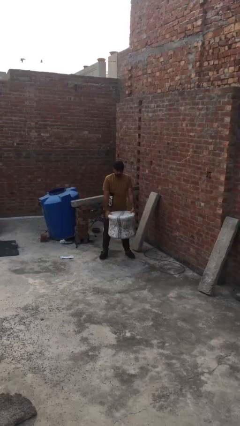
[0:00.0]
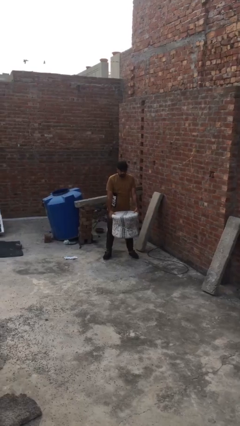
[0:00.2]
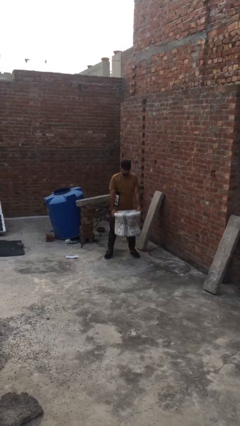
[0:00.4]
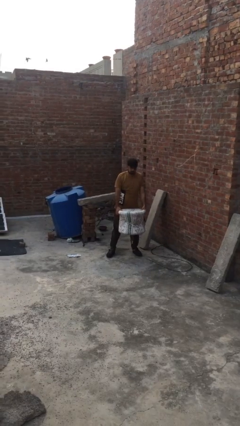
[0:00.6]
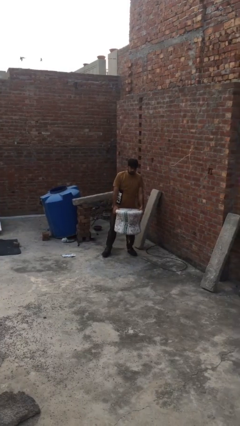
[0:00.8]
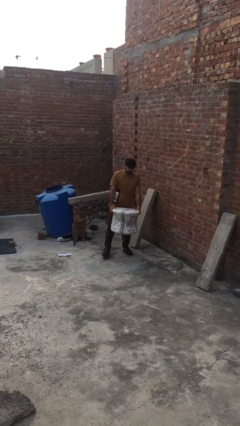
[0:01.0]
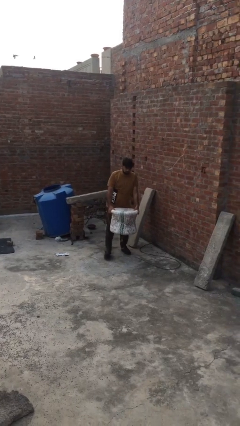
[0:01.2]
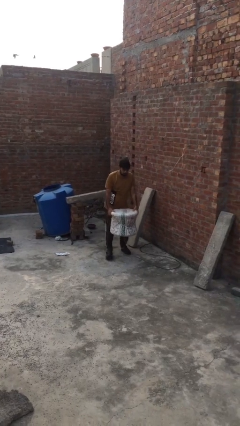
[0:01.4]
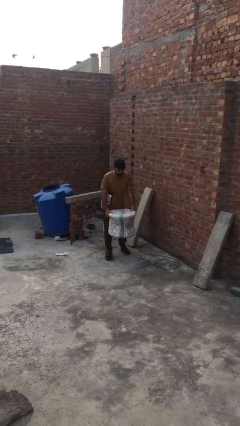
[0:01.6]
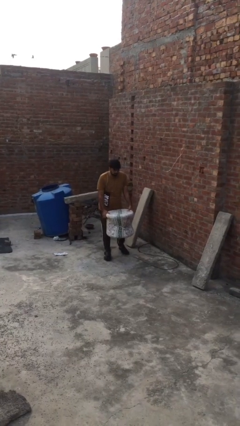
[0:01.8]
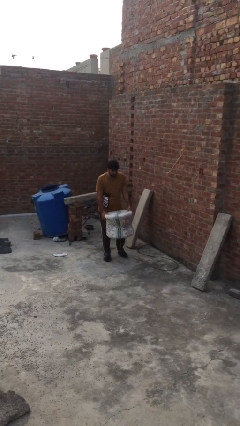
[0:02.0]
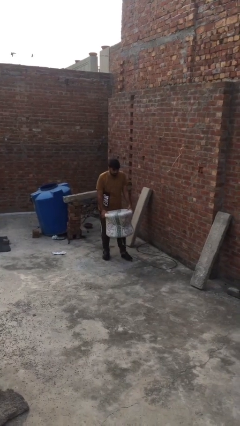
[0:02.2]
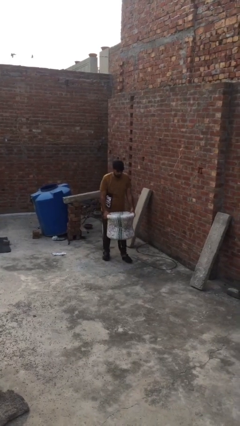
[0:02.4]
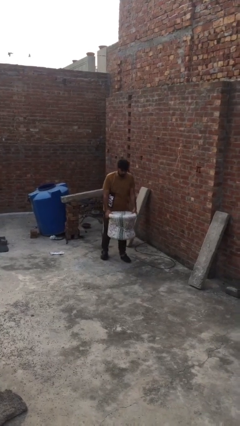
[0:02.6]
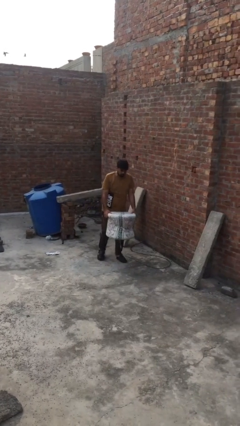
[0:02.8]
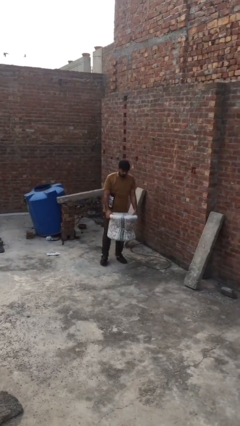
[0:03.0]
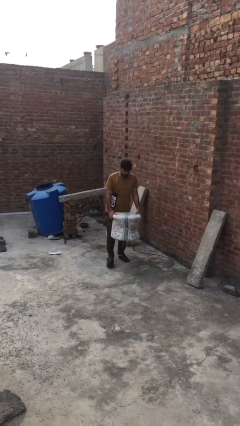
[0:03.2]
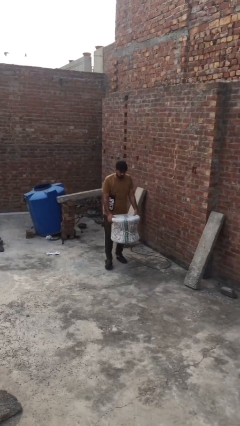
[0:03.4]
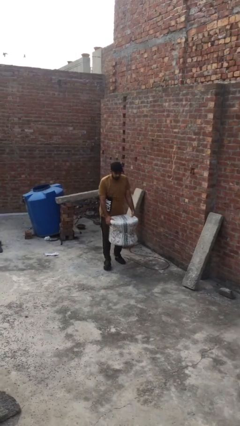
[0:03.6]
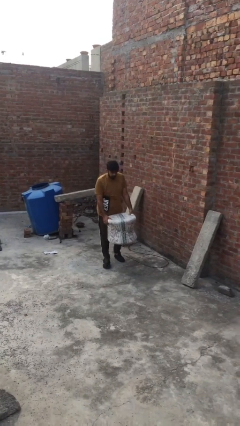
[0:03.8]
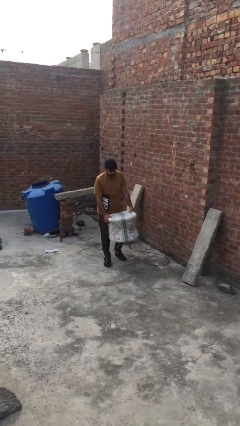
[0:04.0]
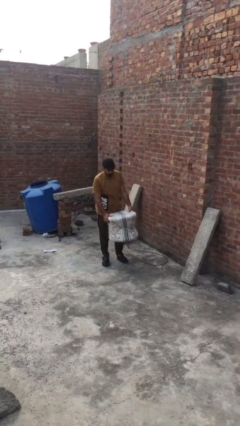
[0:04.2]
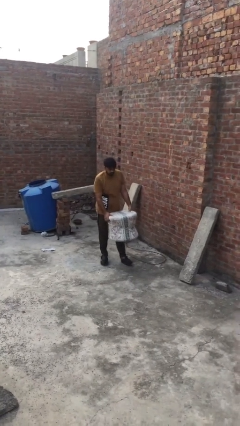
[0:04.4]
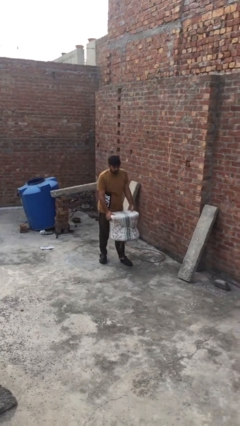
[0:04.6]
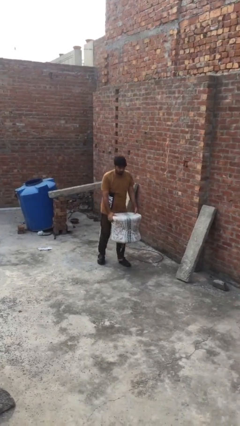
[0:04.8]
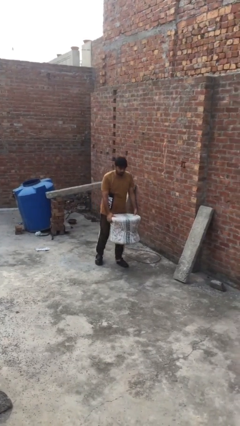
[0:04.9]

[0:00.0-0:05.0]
person carries heavy object

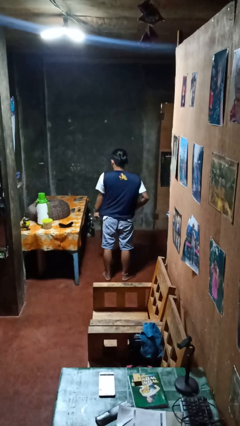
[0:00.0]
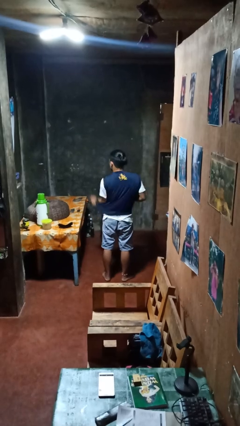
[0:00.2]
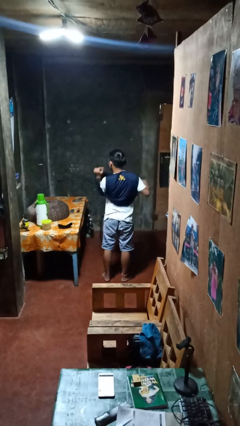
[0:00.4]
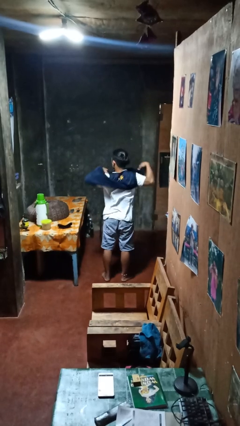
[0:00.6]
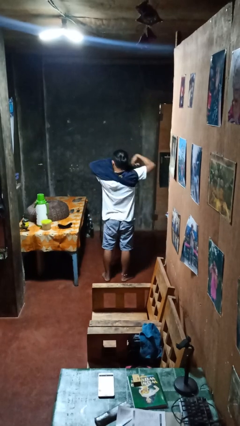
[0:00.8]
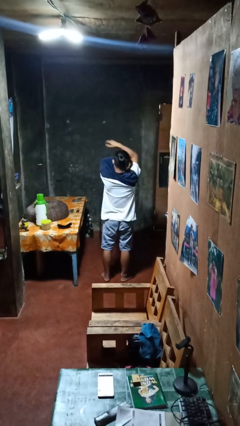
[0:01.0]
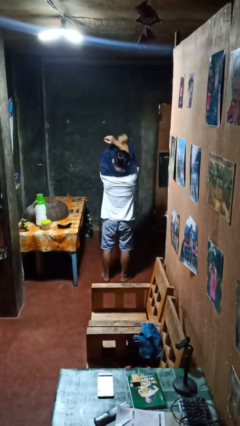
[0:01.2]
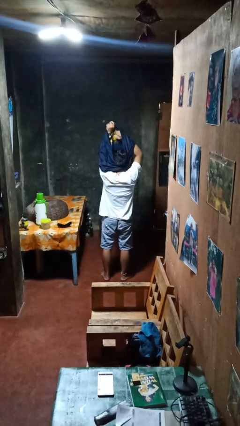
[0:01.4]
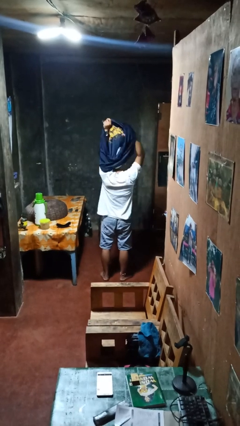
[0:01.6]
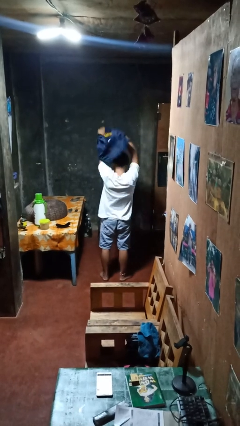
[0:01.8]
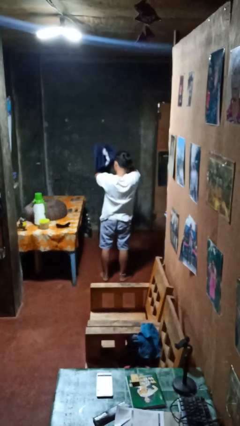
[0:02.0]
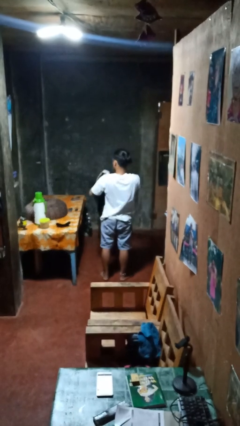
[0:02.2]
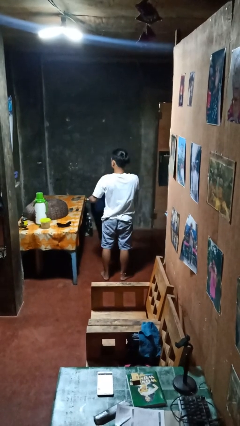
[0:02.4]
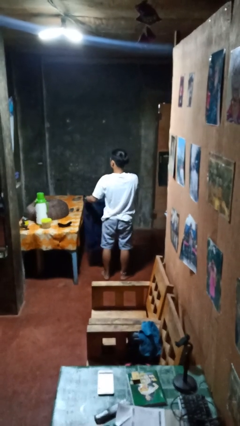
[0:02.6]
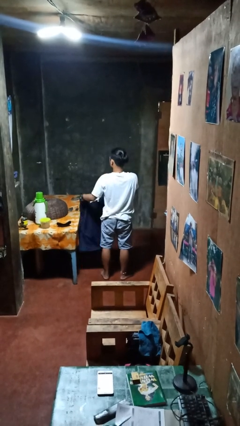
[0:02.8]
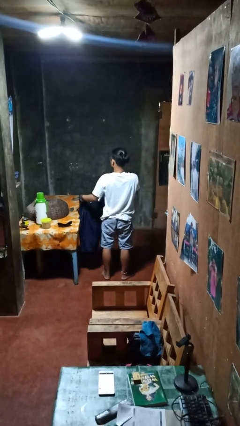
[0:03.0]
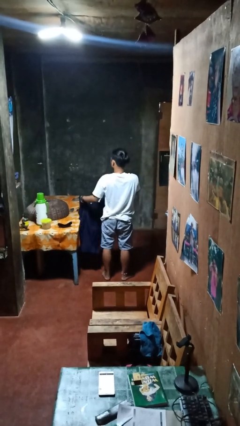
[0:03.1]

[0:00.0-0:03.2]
person takes off shirt

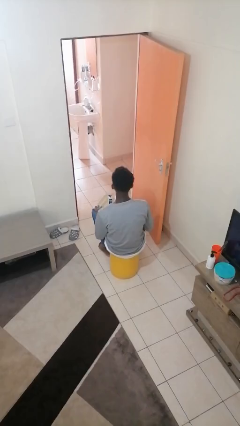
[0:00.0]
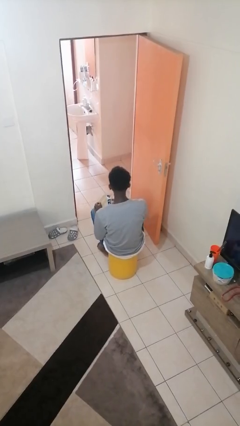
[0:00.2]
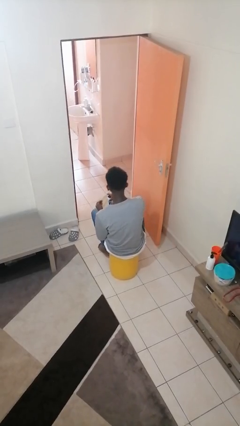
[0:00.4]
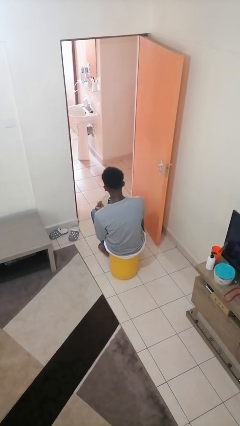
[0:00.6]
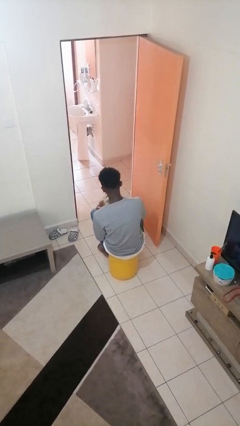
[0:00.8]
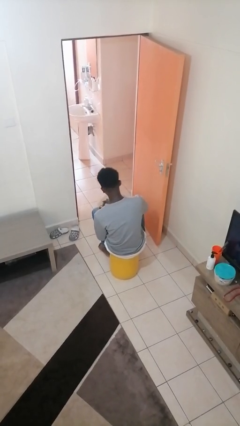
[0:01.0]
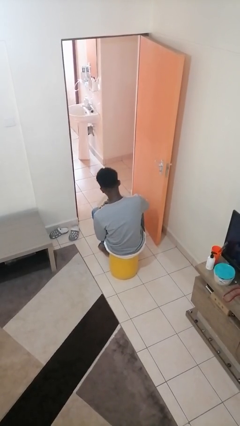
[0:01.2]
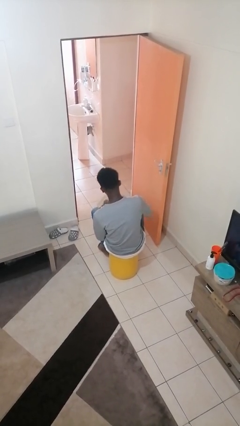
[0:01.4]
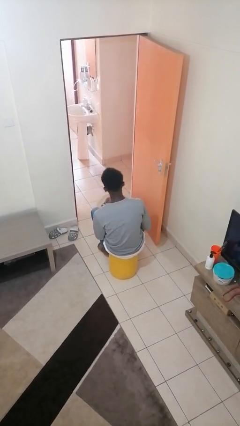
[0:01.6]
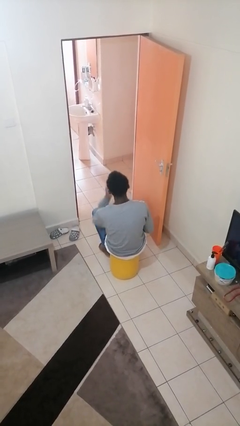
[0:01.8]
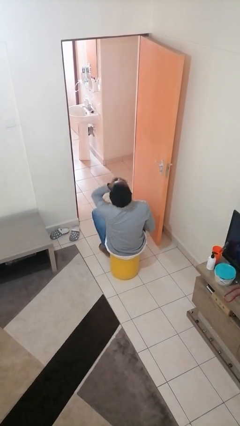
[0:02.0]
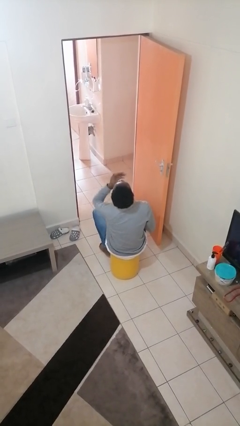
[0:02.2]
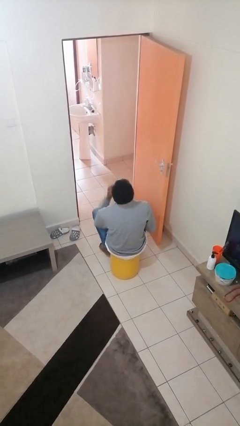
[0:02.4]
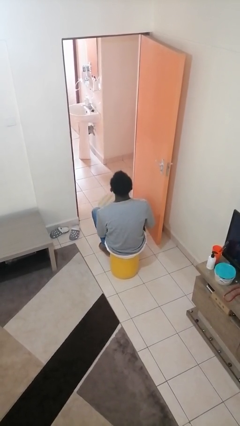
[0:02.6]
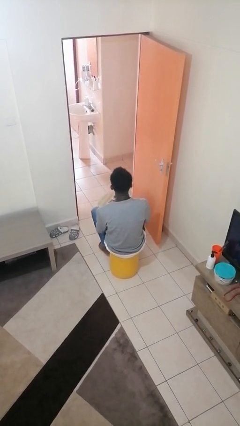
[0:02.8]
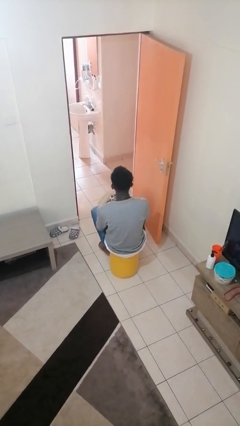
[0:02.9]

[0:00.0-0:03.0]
person takes medicine pills

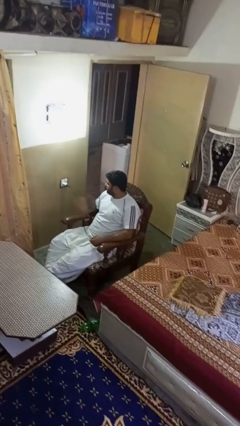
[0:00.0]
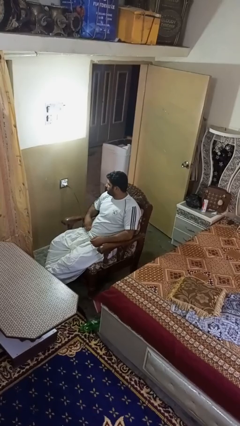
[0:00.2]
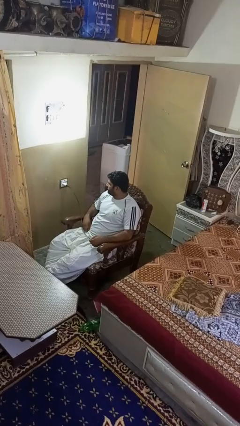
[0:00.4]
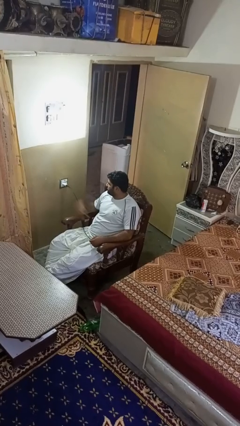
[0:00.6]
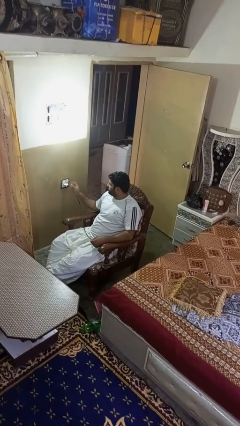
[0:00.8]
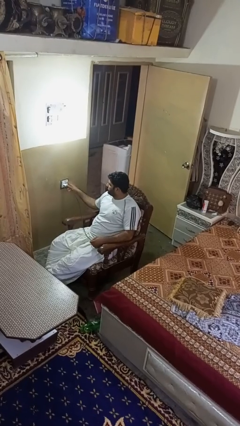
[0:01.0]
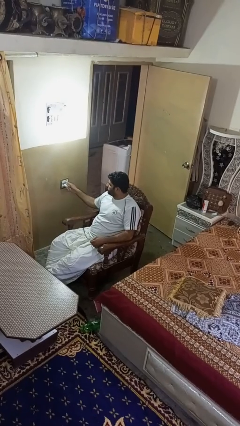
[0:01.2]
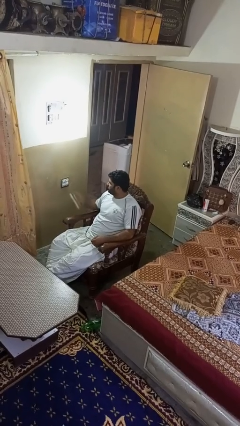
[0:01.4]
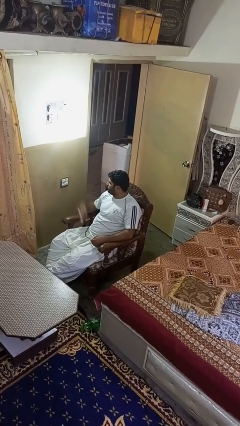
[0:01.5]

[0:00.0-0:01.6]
person unplugs from electrical socket

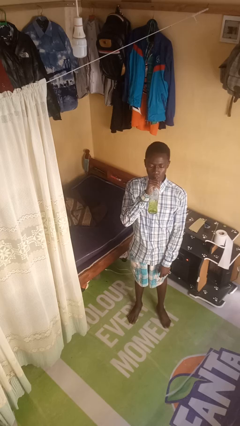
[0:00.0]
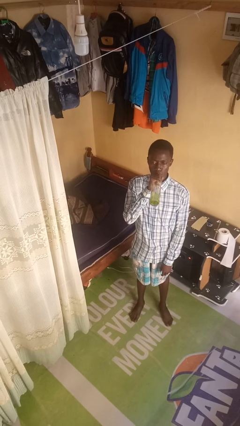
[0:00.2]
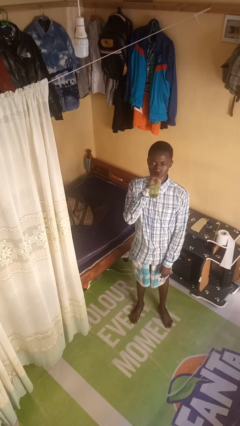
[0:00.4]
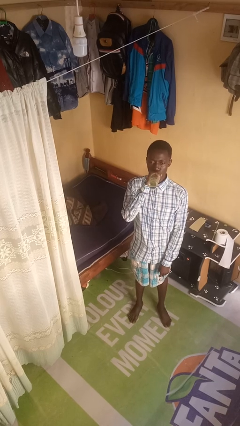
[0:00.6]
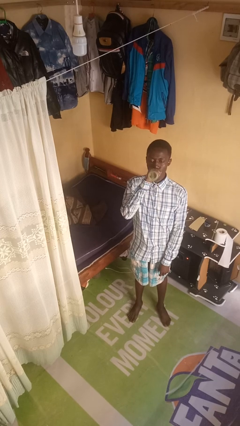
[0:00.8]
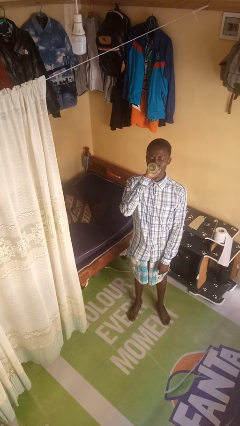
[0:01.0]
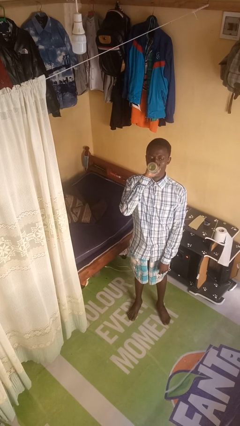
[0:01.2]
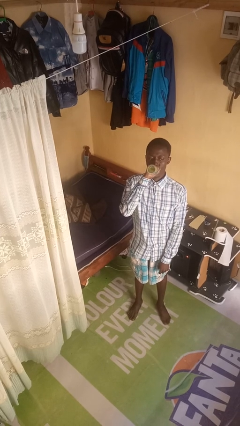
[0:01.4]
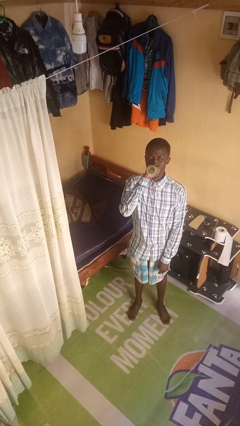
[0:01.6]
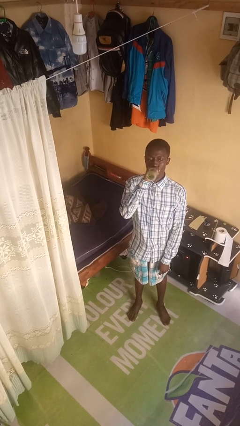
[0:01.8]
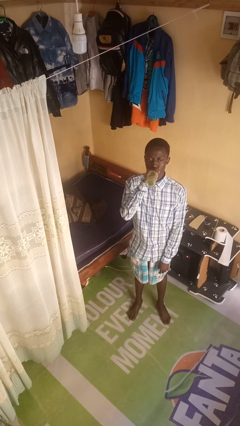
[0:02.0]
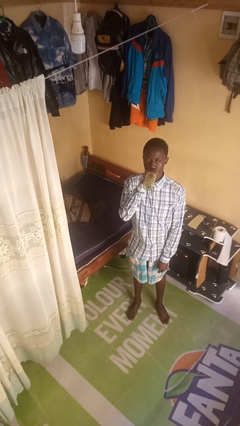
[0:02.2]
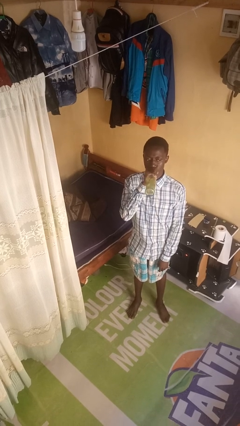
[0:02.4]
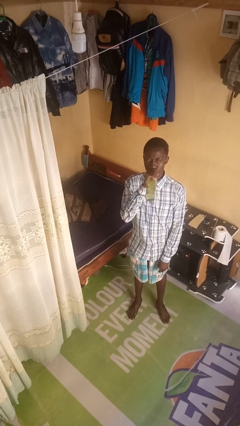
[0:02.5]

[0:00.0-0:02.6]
person drinks from bottle

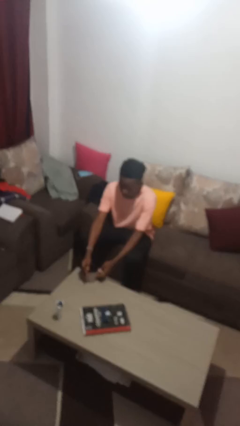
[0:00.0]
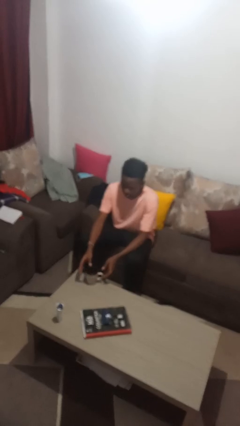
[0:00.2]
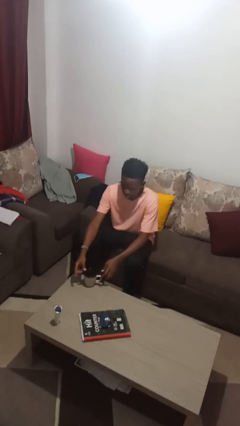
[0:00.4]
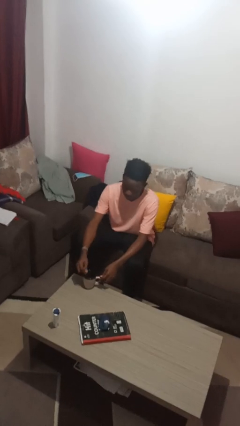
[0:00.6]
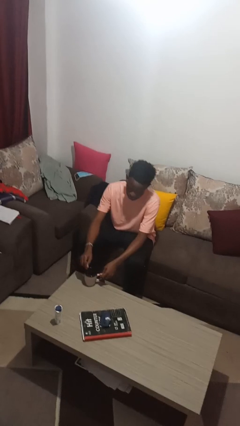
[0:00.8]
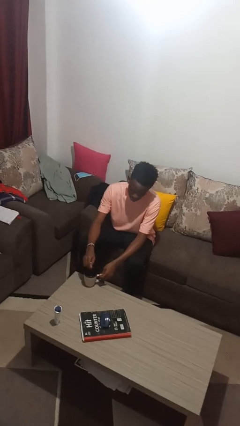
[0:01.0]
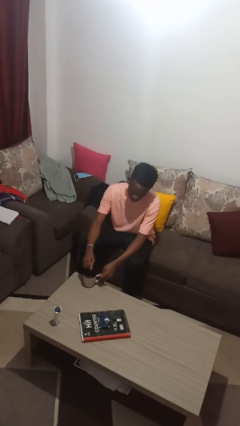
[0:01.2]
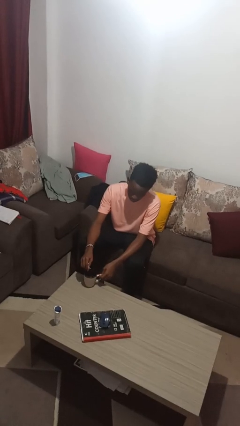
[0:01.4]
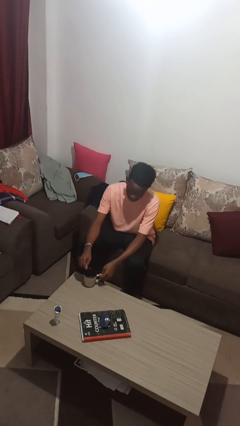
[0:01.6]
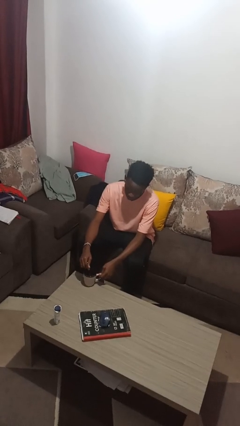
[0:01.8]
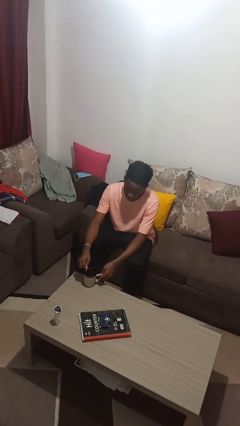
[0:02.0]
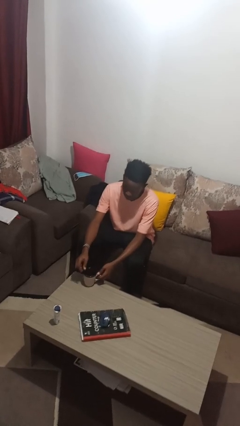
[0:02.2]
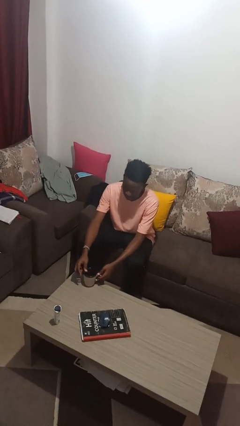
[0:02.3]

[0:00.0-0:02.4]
person stirs mug
